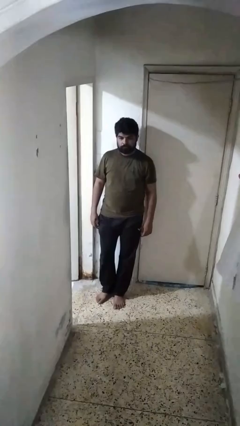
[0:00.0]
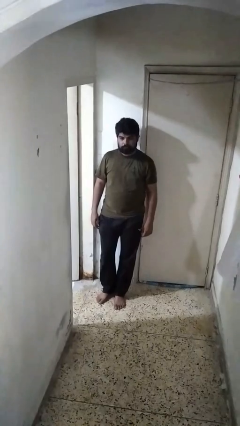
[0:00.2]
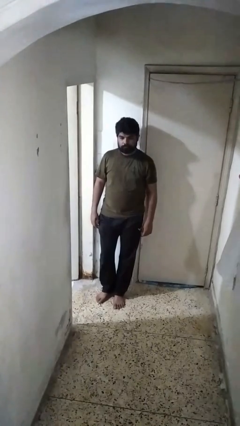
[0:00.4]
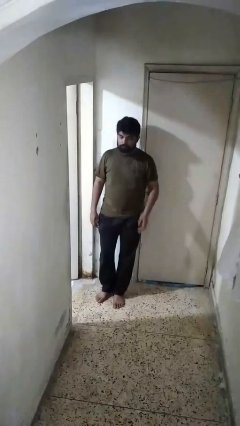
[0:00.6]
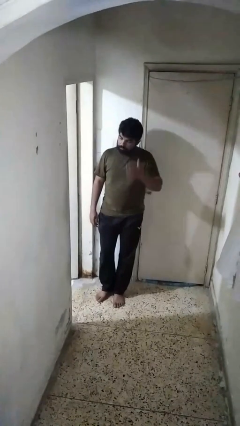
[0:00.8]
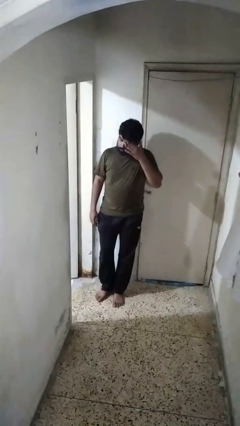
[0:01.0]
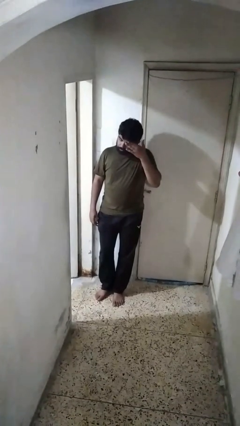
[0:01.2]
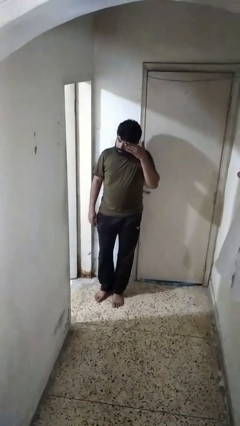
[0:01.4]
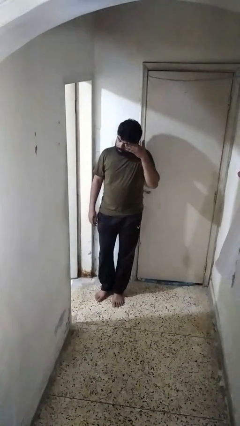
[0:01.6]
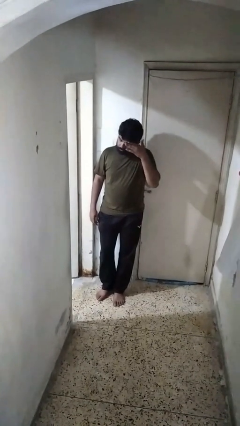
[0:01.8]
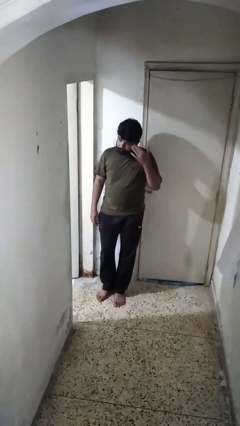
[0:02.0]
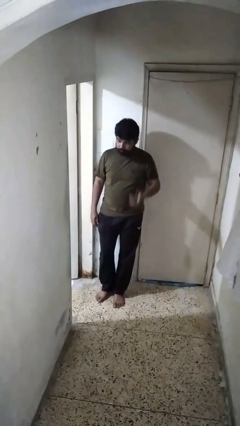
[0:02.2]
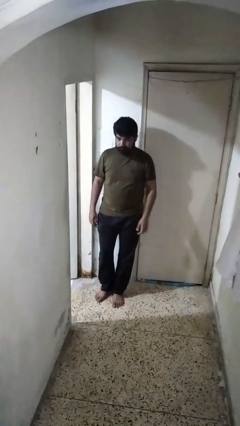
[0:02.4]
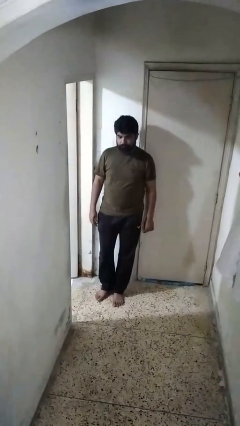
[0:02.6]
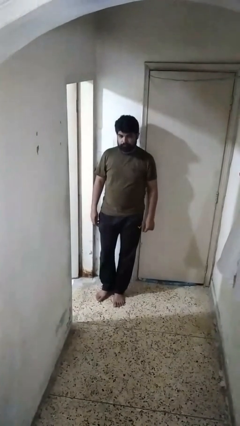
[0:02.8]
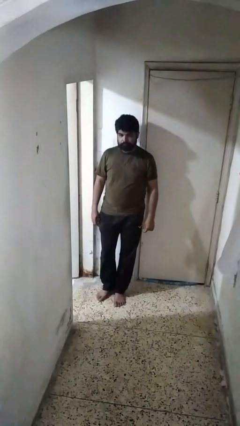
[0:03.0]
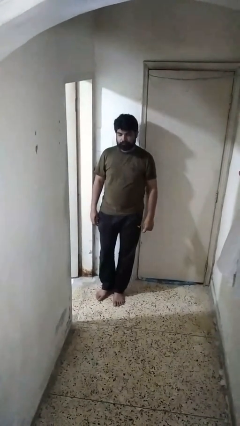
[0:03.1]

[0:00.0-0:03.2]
person rubs eyes

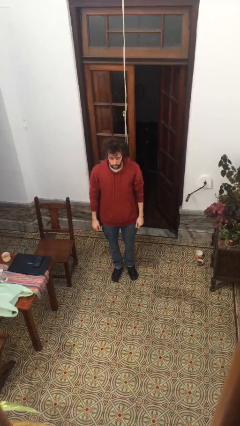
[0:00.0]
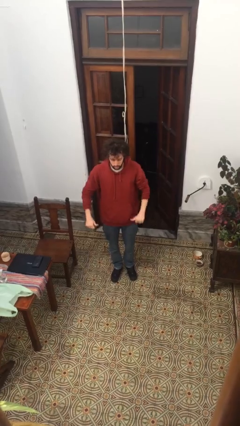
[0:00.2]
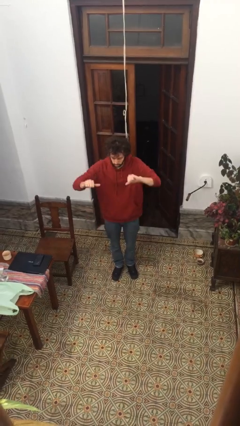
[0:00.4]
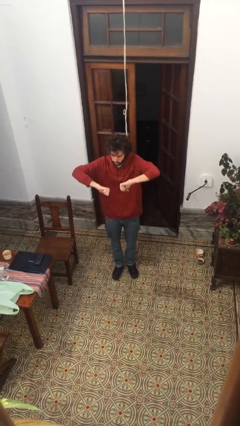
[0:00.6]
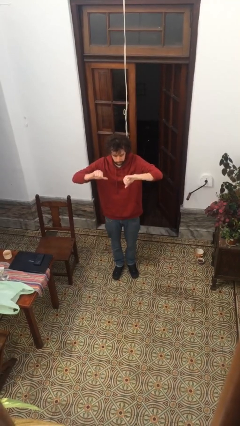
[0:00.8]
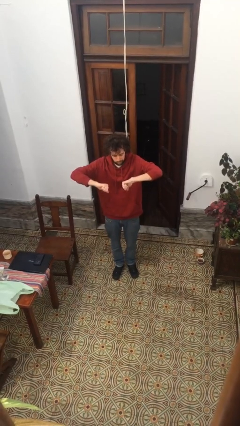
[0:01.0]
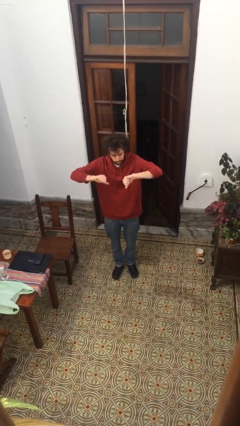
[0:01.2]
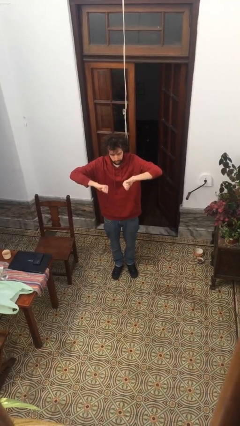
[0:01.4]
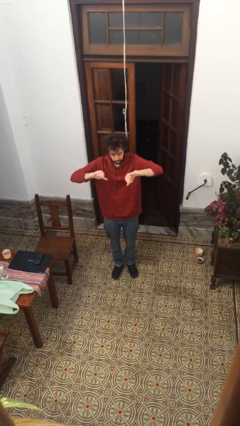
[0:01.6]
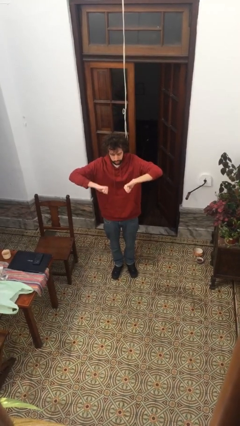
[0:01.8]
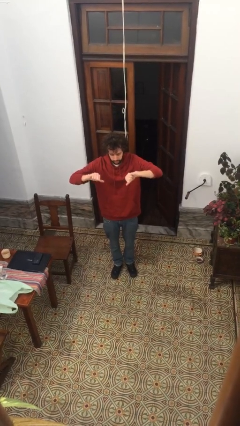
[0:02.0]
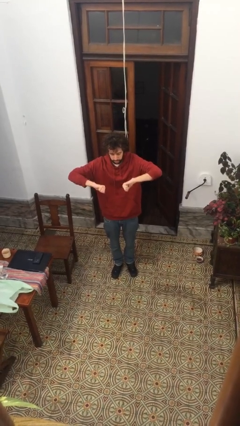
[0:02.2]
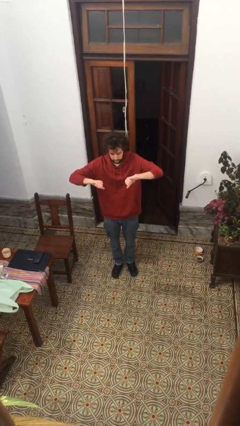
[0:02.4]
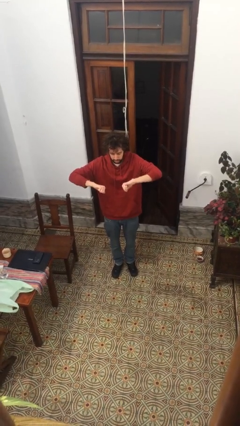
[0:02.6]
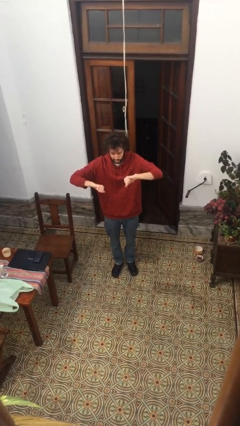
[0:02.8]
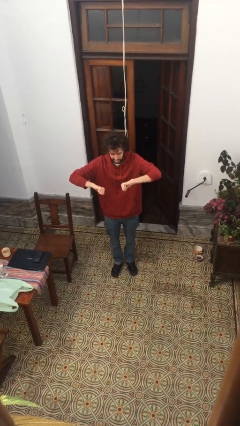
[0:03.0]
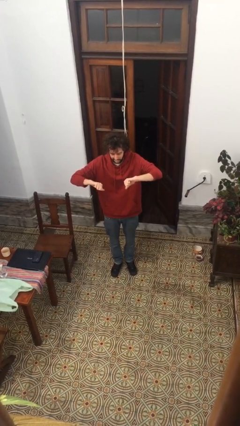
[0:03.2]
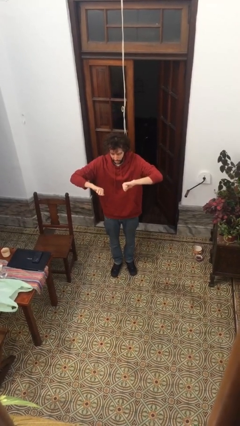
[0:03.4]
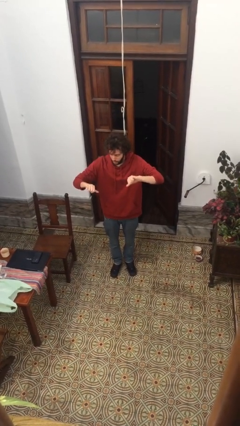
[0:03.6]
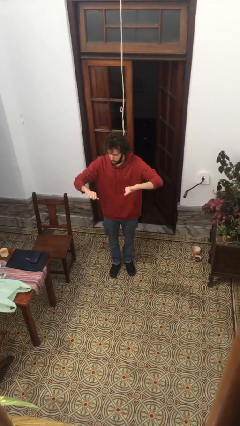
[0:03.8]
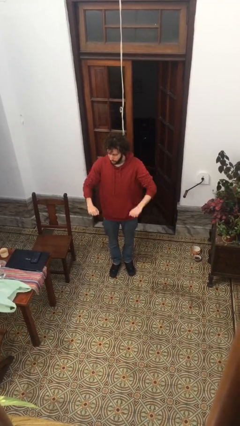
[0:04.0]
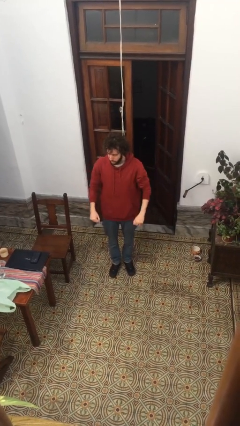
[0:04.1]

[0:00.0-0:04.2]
person gestures thumbs down

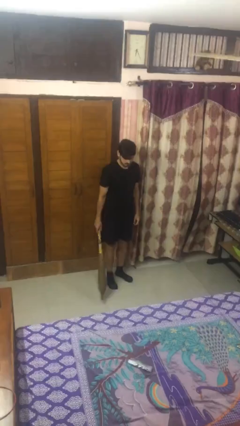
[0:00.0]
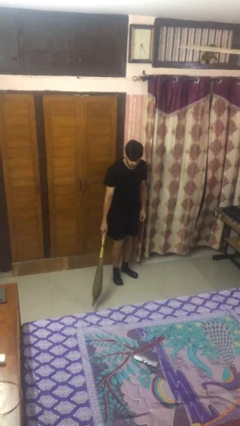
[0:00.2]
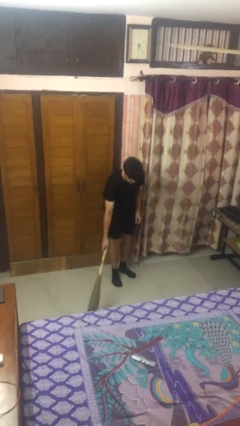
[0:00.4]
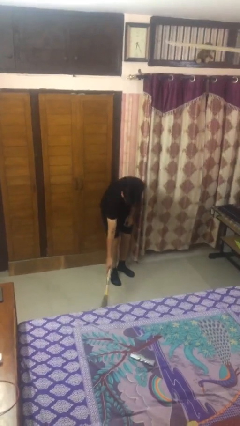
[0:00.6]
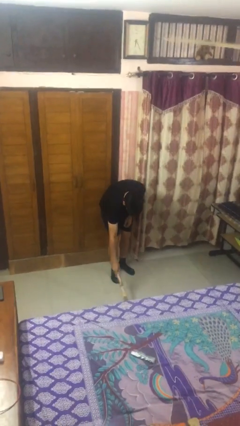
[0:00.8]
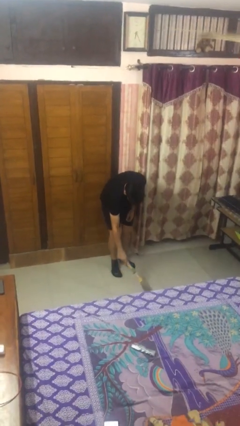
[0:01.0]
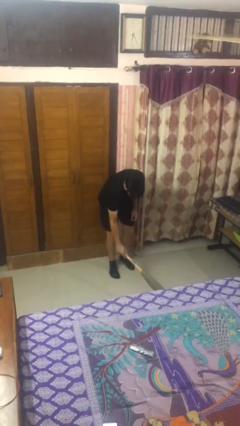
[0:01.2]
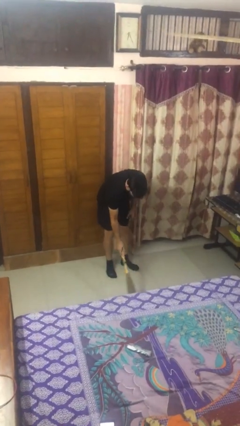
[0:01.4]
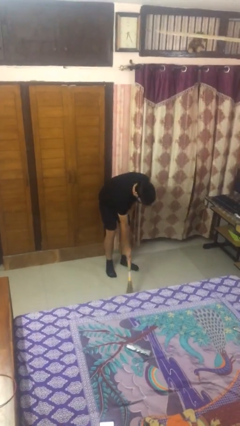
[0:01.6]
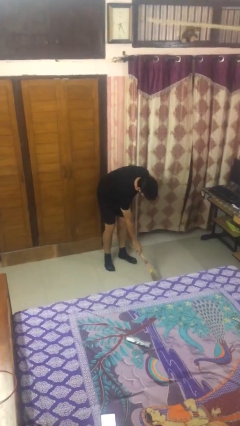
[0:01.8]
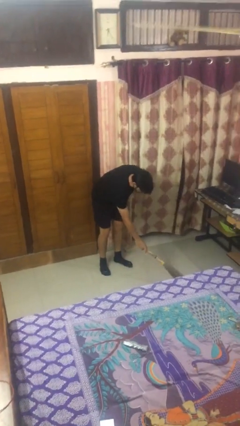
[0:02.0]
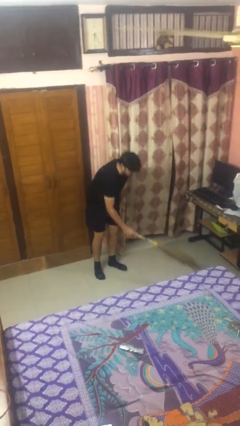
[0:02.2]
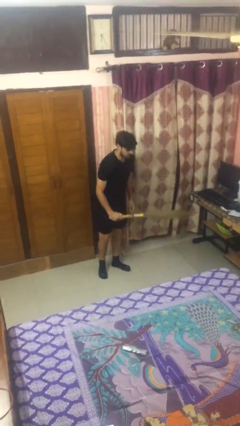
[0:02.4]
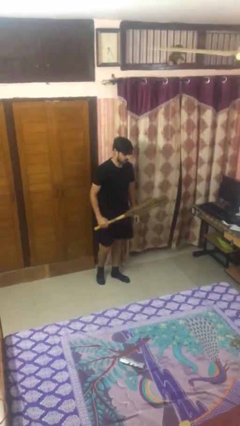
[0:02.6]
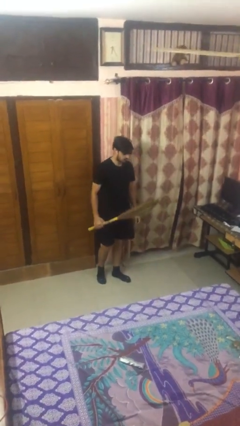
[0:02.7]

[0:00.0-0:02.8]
person sweeps floor

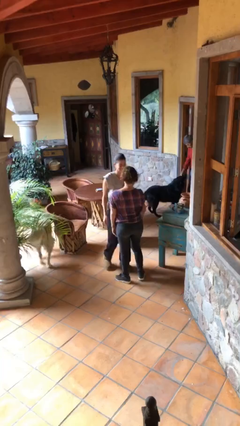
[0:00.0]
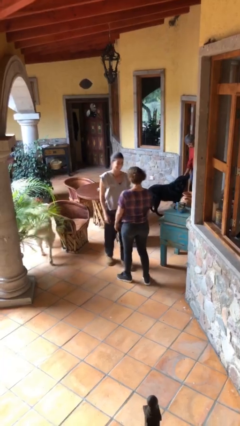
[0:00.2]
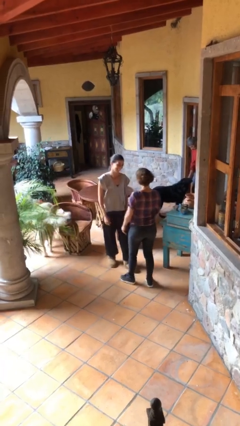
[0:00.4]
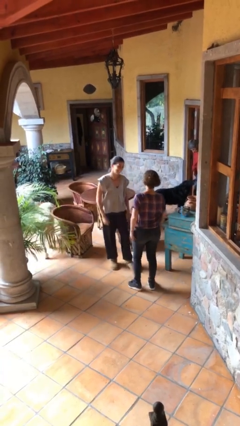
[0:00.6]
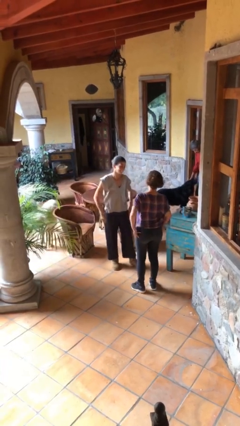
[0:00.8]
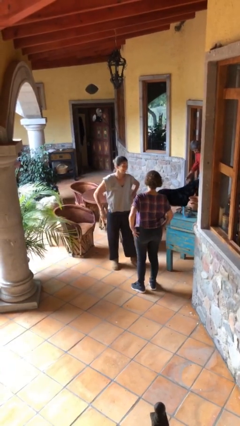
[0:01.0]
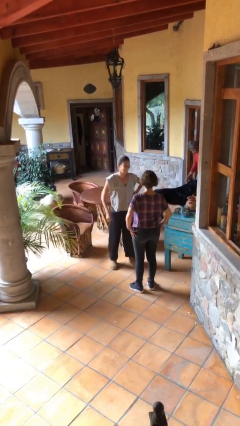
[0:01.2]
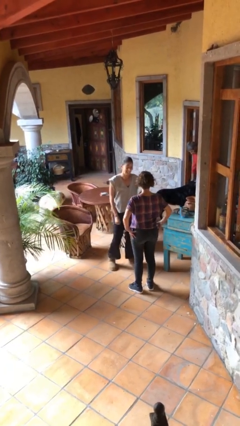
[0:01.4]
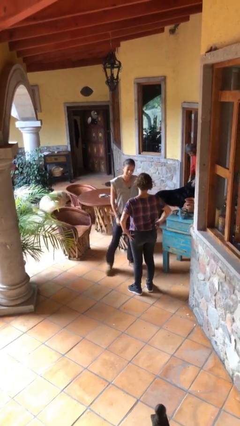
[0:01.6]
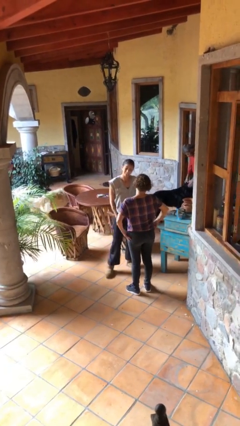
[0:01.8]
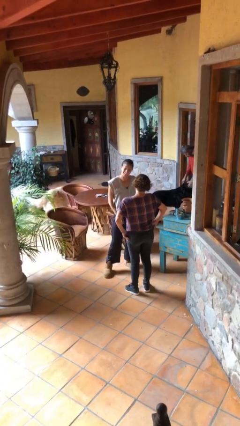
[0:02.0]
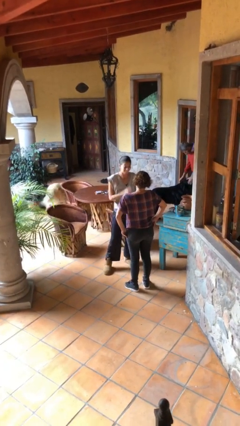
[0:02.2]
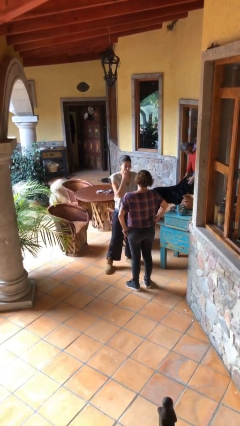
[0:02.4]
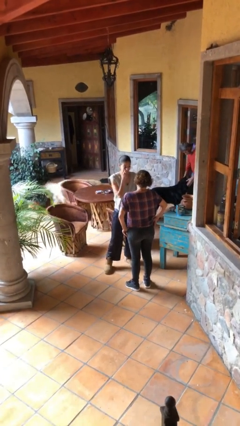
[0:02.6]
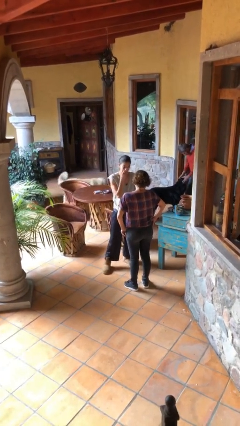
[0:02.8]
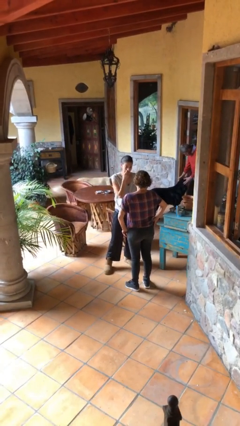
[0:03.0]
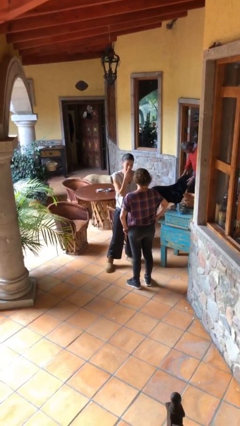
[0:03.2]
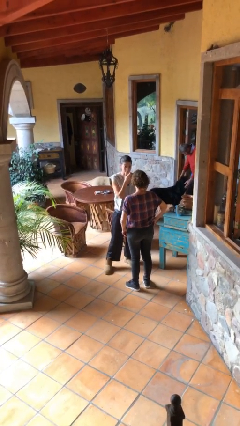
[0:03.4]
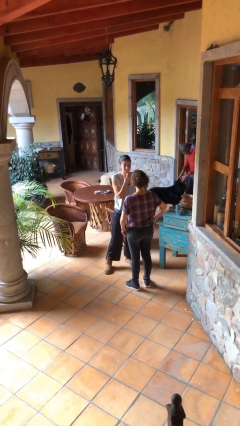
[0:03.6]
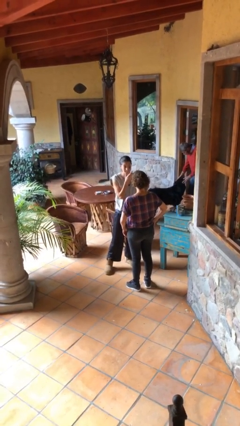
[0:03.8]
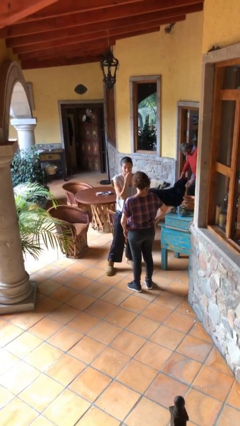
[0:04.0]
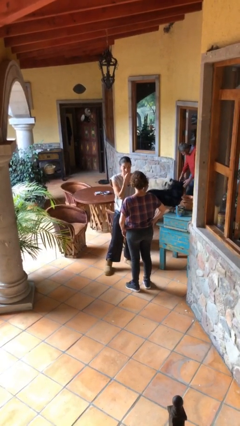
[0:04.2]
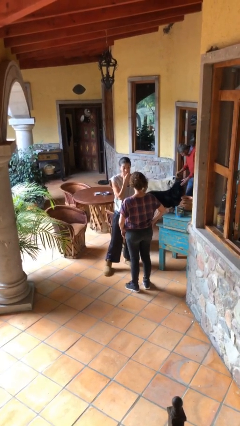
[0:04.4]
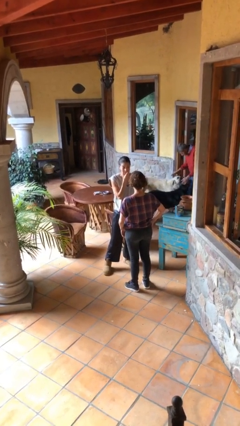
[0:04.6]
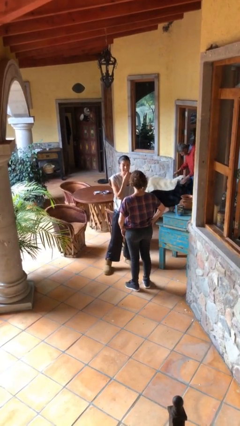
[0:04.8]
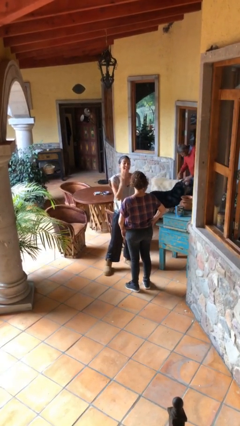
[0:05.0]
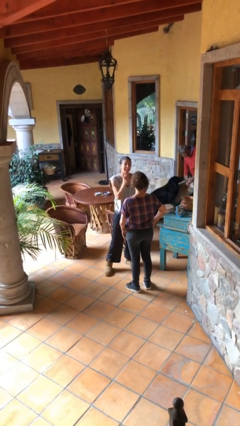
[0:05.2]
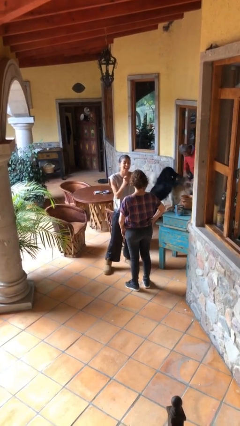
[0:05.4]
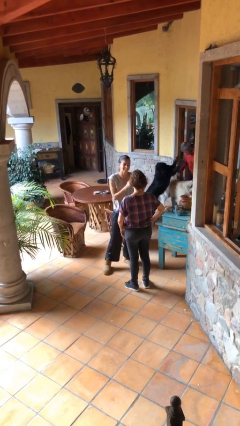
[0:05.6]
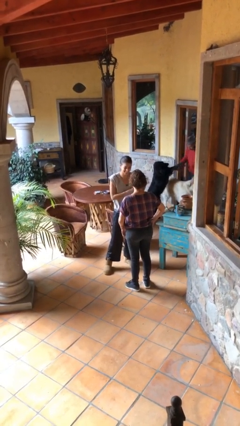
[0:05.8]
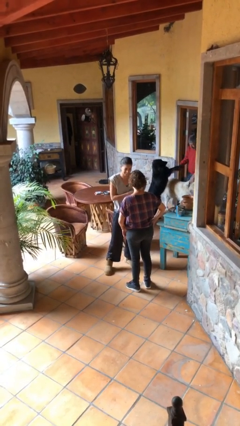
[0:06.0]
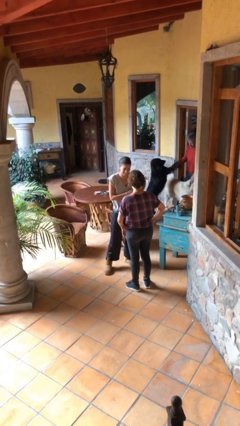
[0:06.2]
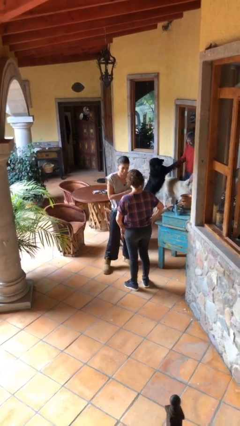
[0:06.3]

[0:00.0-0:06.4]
person talks to person

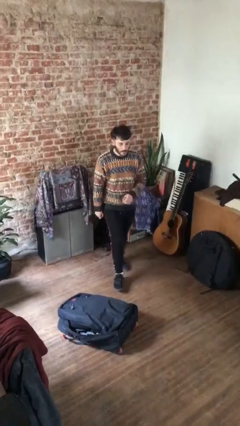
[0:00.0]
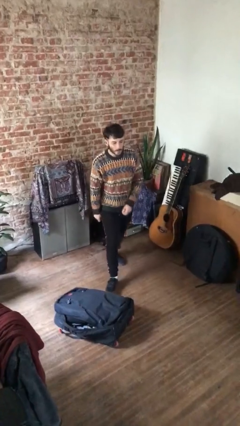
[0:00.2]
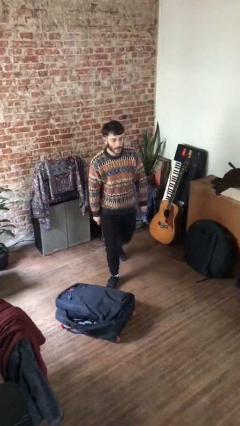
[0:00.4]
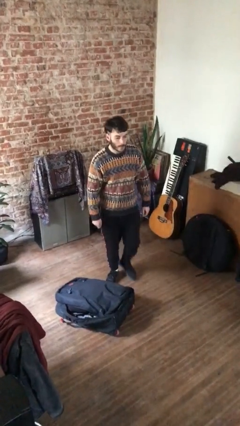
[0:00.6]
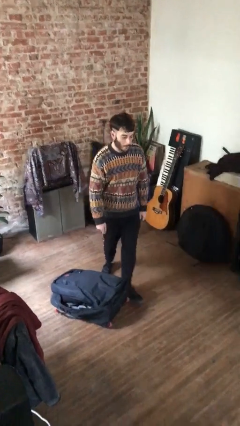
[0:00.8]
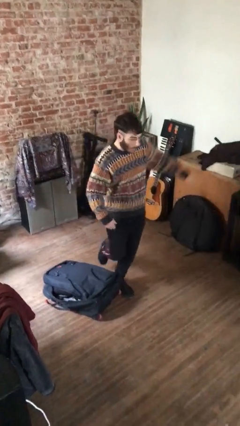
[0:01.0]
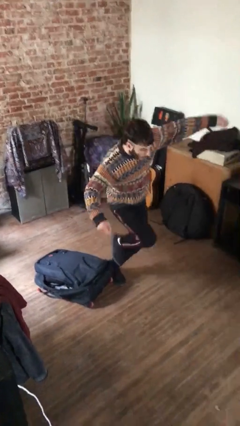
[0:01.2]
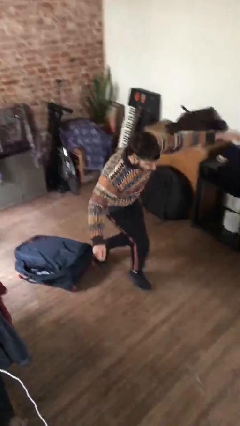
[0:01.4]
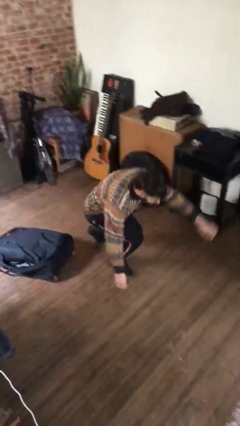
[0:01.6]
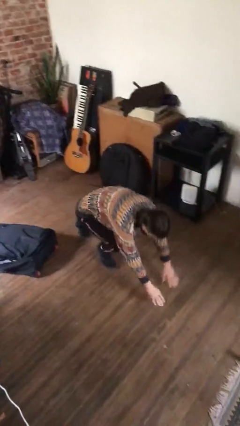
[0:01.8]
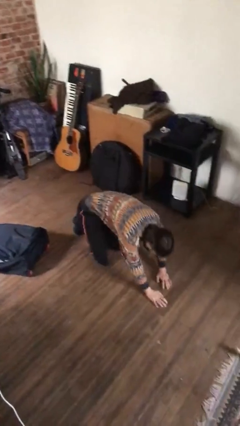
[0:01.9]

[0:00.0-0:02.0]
person trips on object on floor
